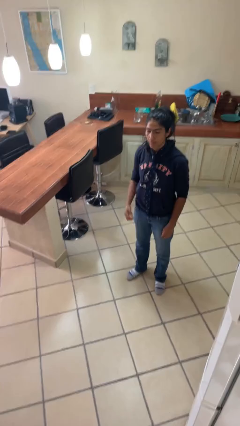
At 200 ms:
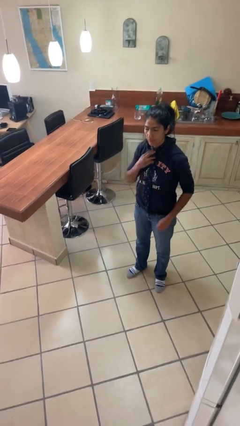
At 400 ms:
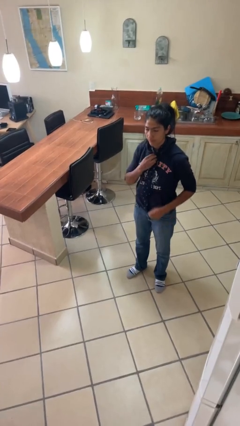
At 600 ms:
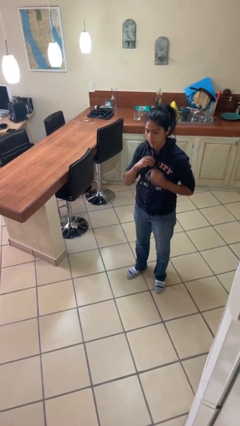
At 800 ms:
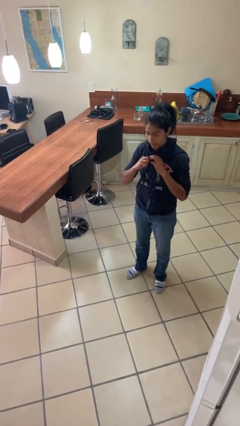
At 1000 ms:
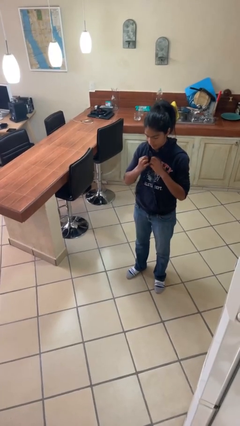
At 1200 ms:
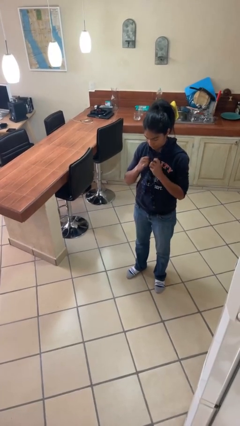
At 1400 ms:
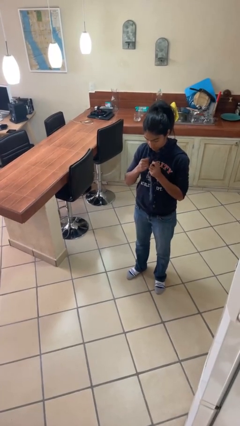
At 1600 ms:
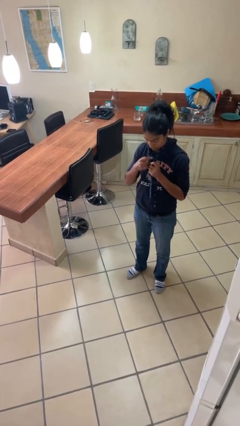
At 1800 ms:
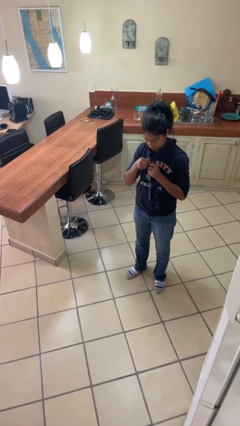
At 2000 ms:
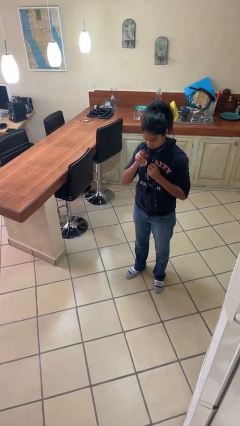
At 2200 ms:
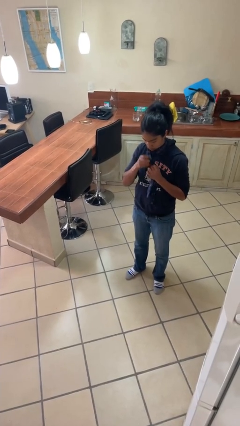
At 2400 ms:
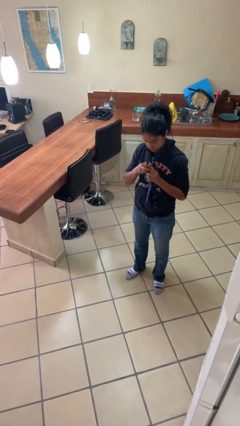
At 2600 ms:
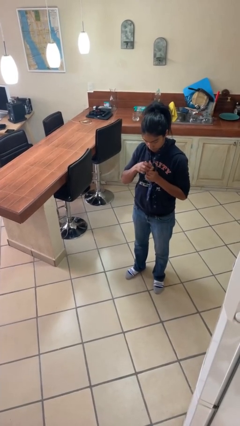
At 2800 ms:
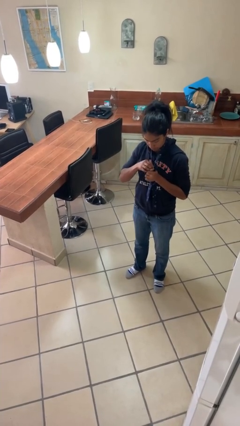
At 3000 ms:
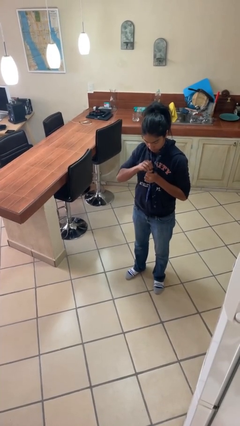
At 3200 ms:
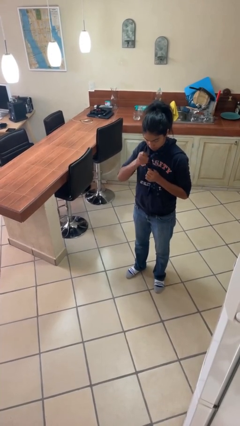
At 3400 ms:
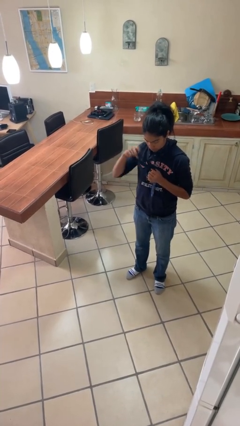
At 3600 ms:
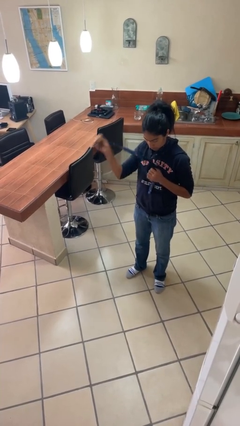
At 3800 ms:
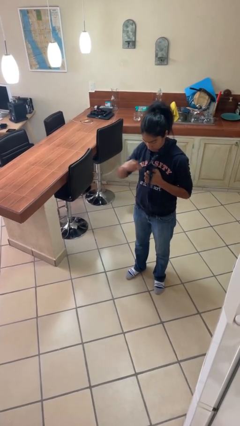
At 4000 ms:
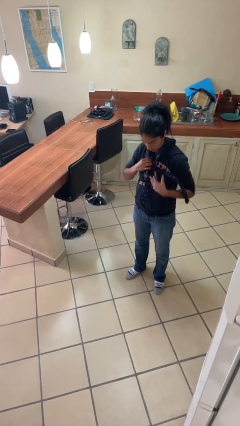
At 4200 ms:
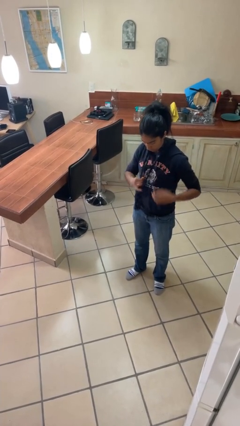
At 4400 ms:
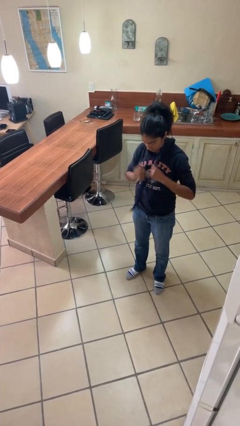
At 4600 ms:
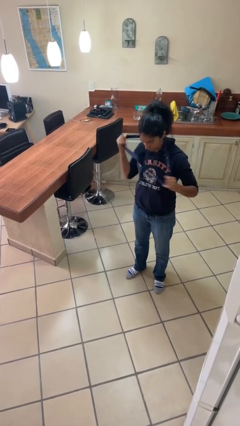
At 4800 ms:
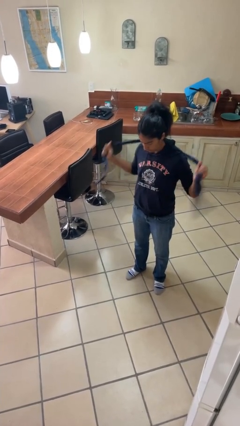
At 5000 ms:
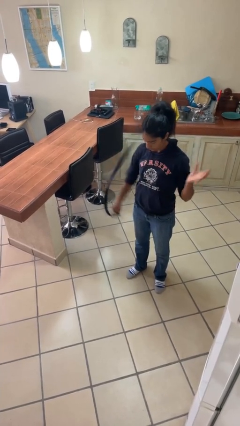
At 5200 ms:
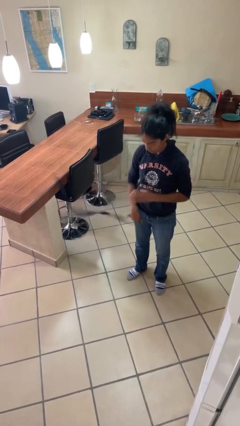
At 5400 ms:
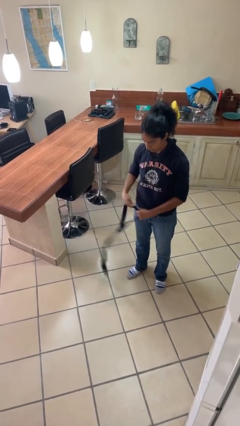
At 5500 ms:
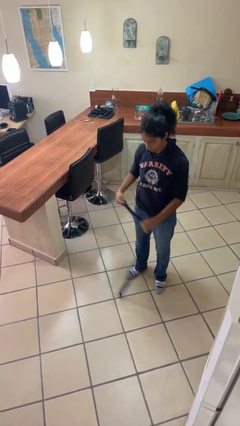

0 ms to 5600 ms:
person takes off necktie

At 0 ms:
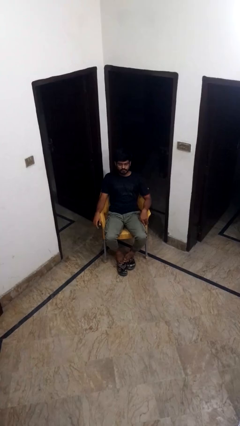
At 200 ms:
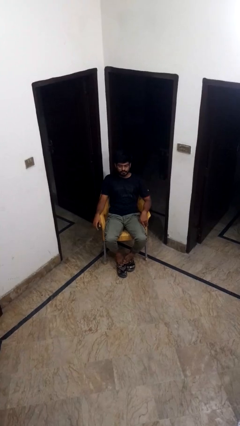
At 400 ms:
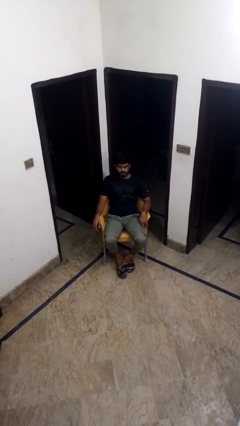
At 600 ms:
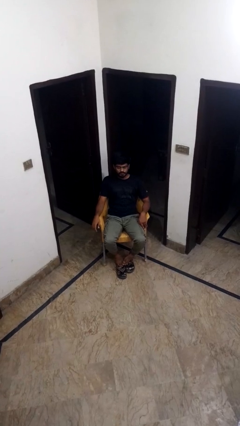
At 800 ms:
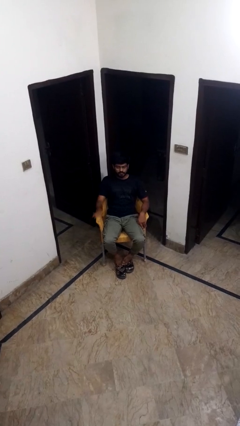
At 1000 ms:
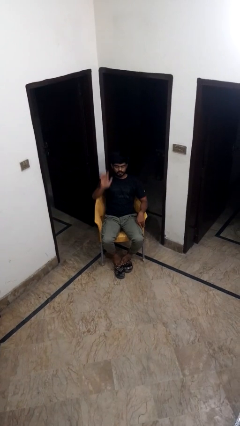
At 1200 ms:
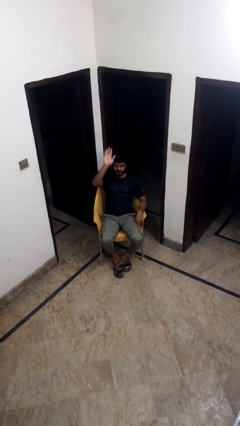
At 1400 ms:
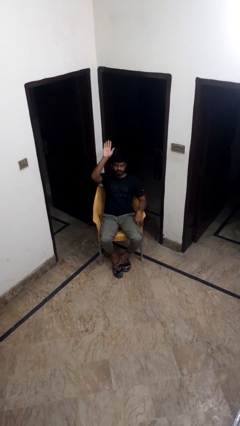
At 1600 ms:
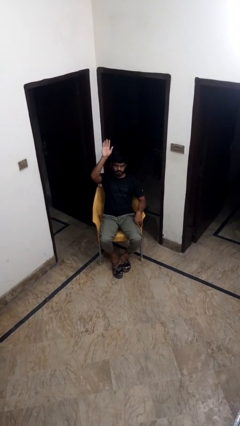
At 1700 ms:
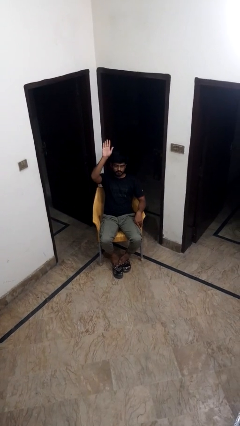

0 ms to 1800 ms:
person gestures raise hand

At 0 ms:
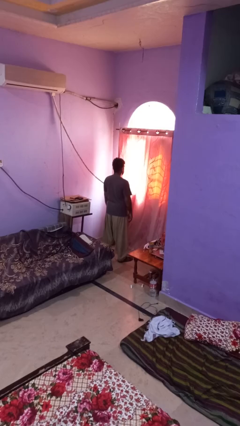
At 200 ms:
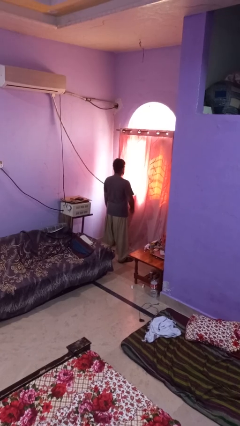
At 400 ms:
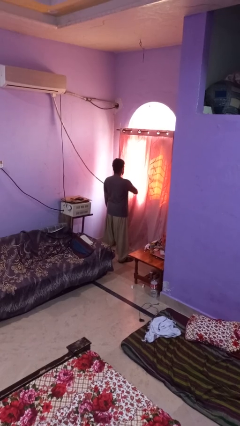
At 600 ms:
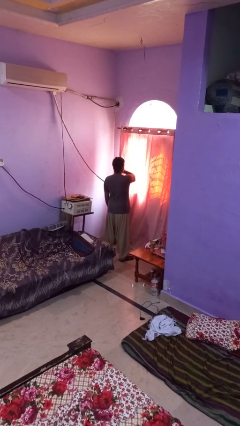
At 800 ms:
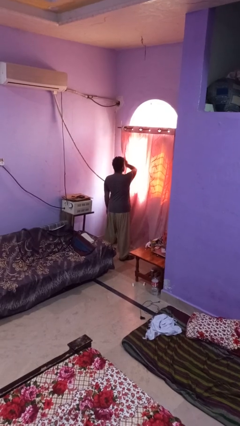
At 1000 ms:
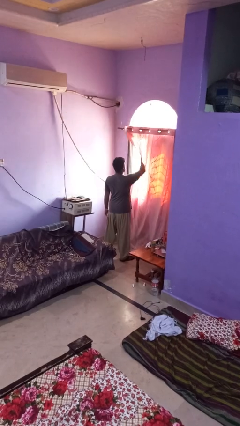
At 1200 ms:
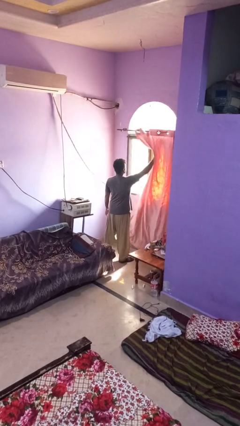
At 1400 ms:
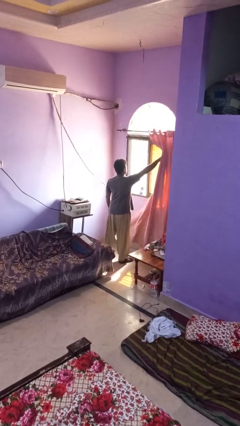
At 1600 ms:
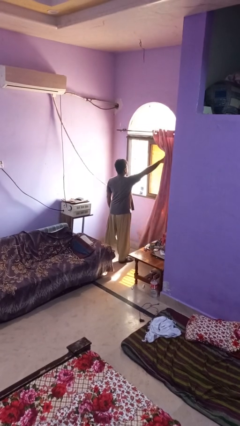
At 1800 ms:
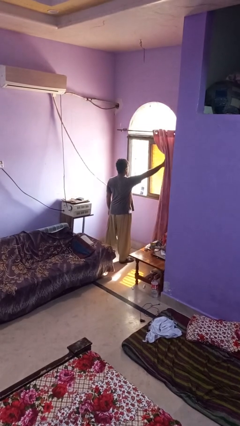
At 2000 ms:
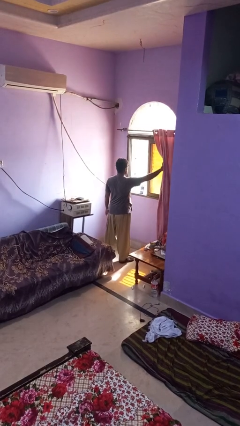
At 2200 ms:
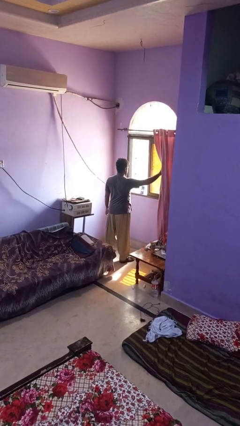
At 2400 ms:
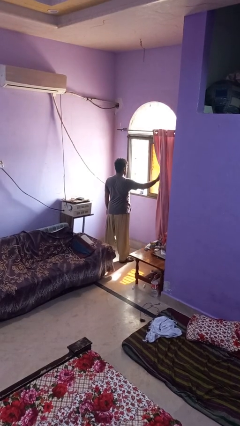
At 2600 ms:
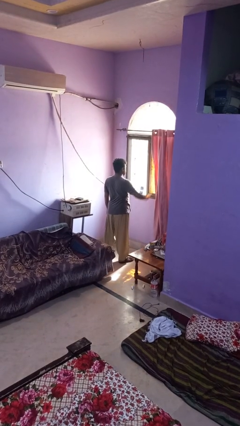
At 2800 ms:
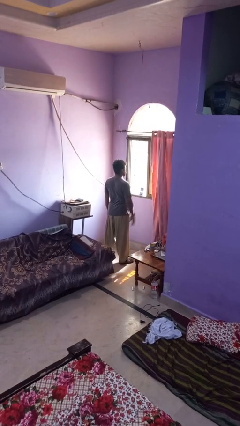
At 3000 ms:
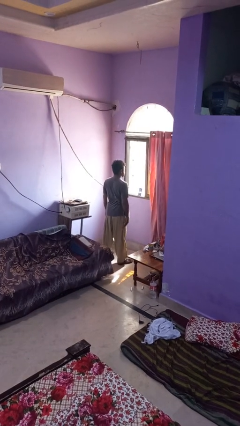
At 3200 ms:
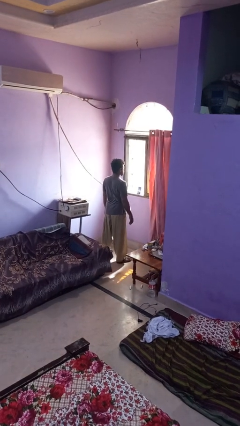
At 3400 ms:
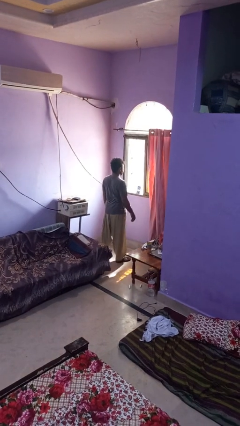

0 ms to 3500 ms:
person opens curtains

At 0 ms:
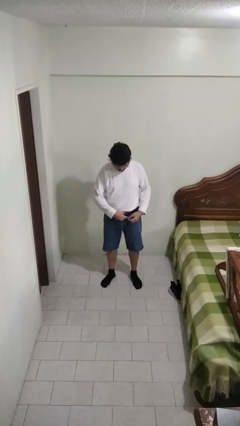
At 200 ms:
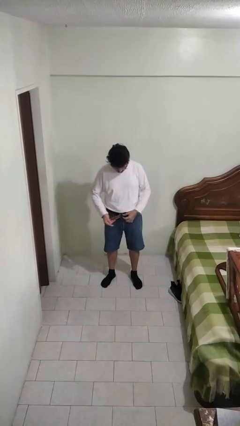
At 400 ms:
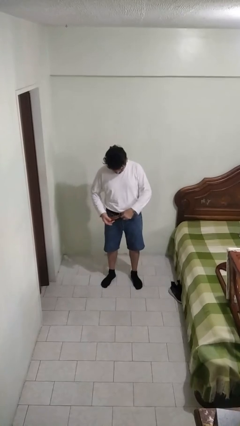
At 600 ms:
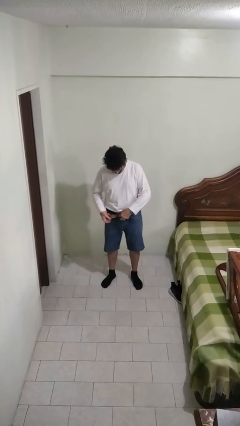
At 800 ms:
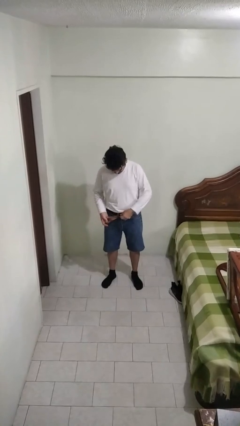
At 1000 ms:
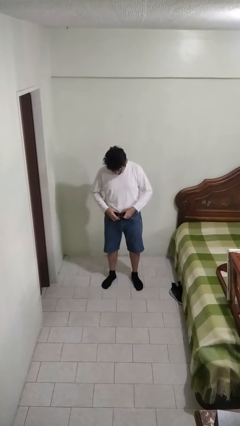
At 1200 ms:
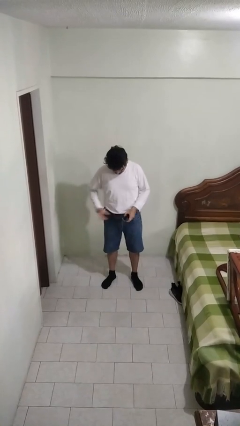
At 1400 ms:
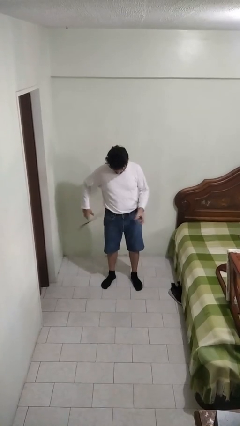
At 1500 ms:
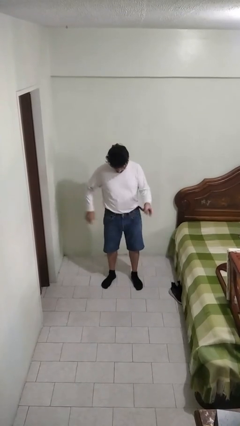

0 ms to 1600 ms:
person takes off belt

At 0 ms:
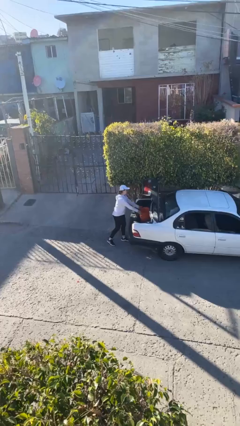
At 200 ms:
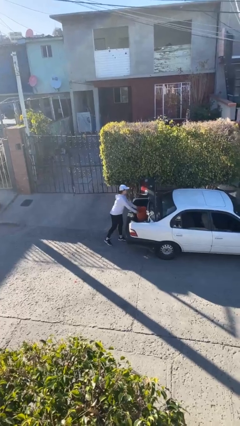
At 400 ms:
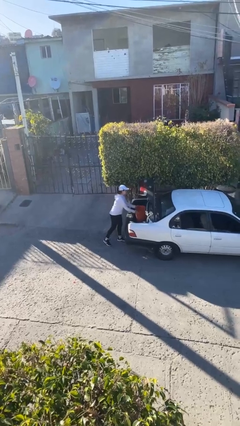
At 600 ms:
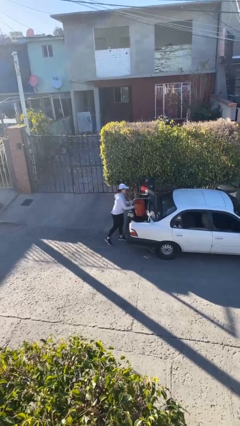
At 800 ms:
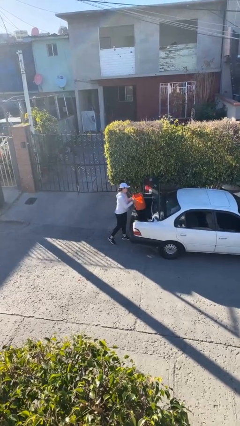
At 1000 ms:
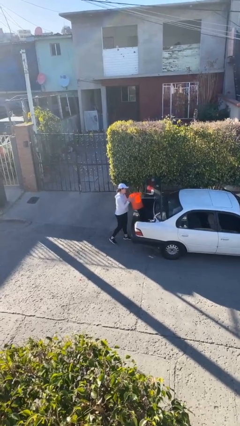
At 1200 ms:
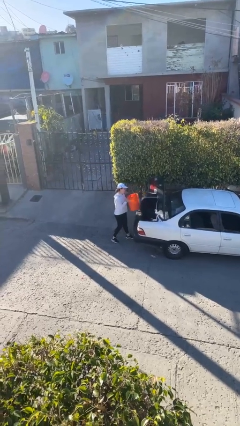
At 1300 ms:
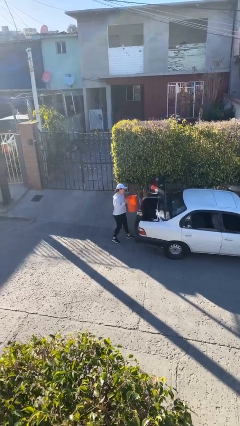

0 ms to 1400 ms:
person unloads car

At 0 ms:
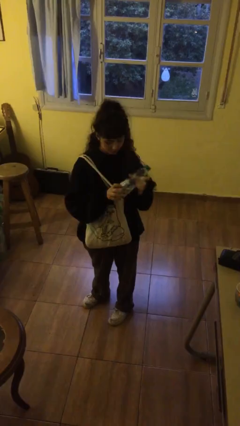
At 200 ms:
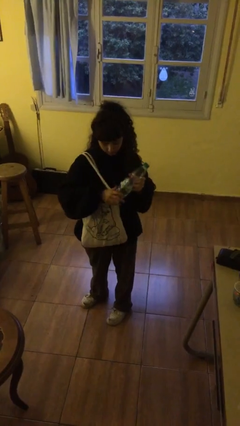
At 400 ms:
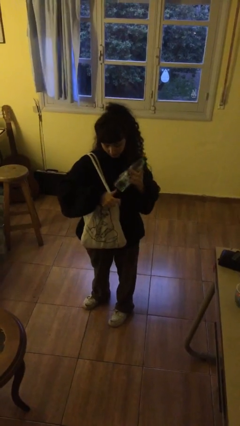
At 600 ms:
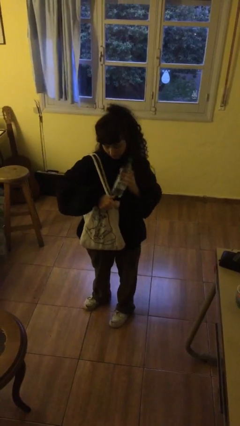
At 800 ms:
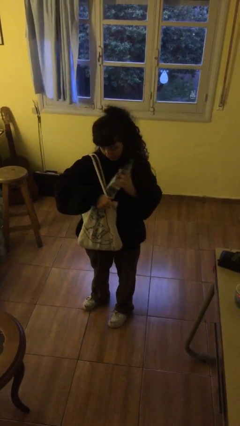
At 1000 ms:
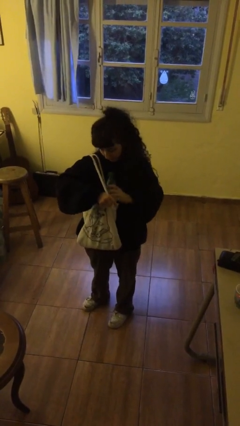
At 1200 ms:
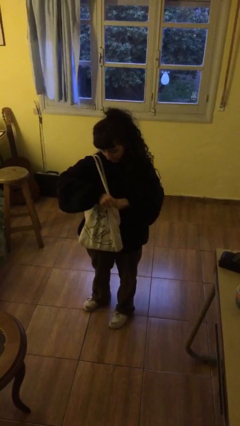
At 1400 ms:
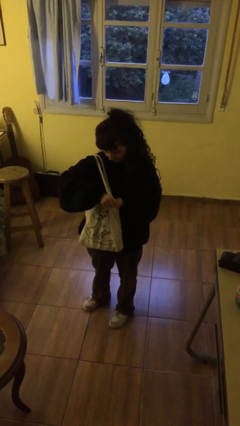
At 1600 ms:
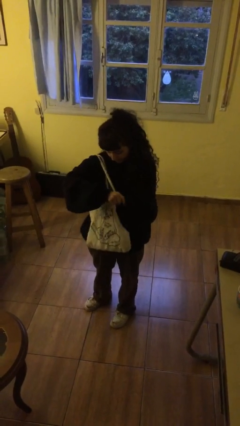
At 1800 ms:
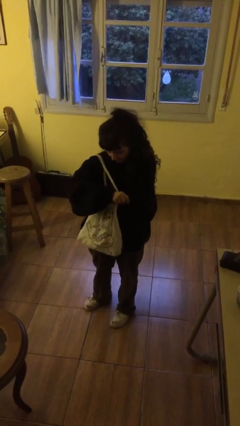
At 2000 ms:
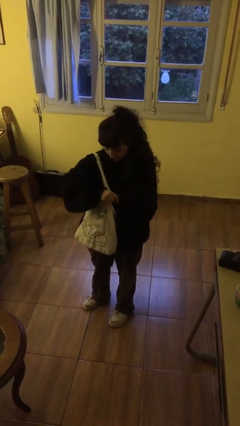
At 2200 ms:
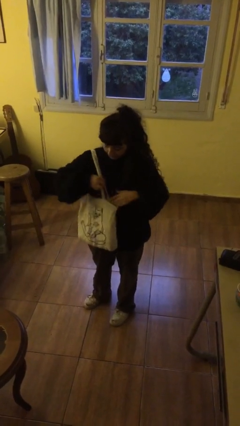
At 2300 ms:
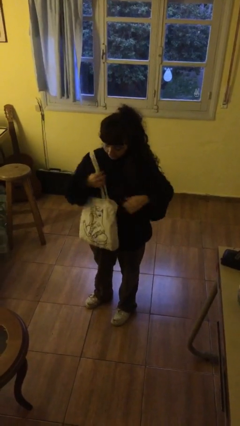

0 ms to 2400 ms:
person puts object into purse

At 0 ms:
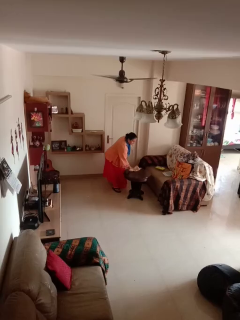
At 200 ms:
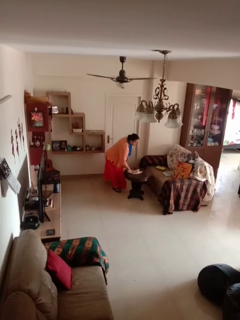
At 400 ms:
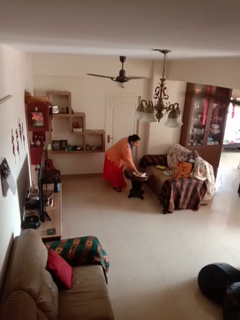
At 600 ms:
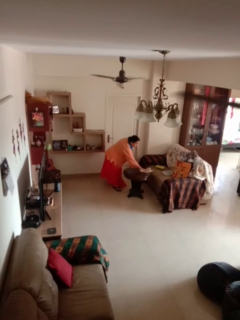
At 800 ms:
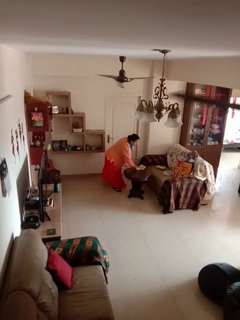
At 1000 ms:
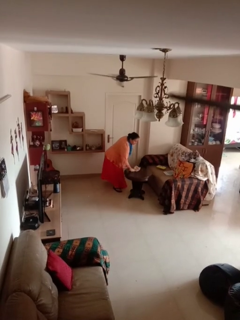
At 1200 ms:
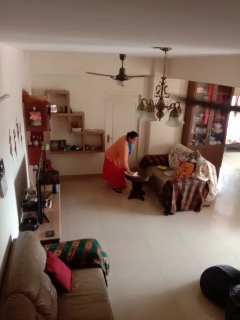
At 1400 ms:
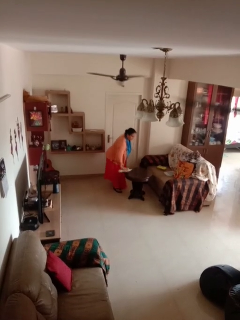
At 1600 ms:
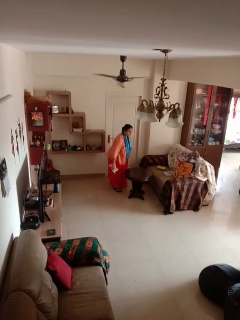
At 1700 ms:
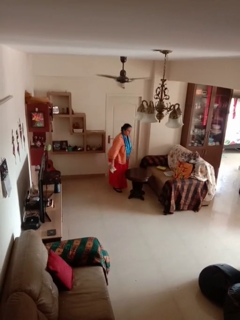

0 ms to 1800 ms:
person cleans table with rag
